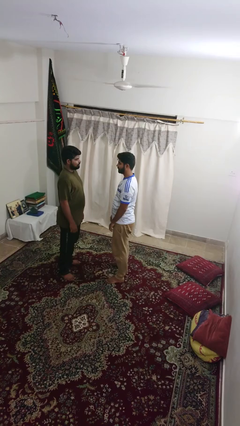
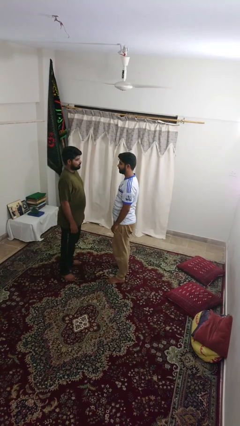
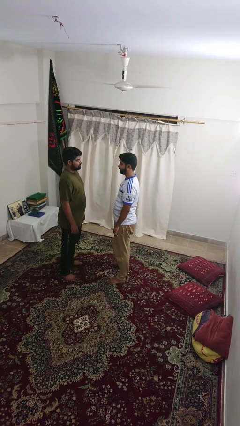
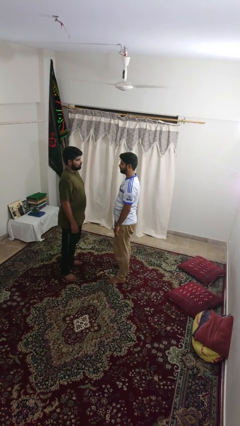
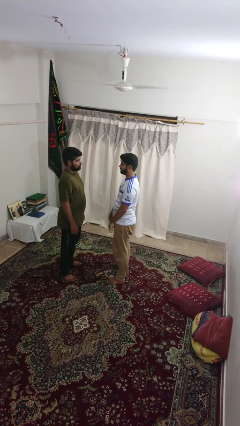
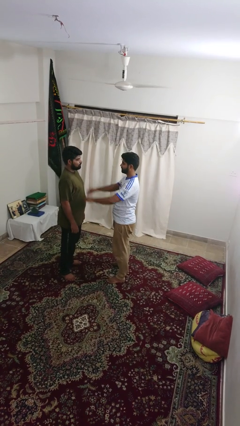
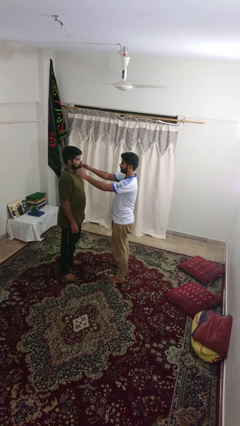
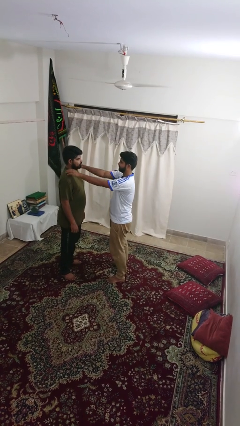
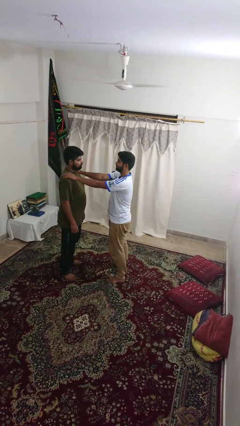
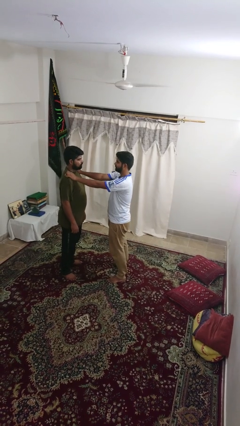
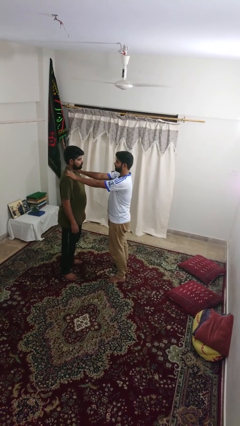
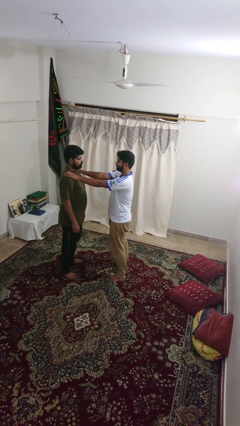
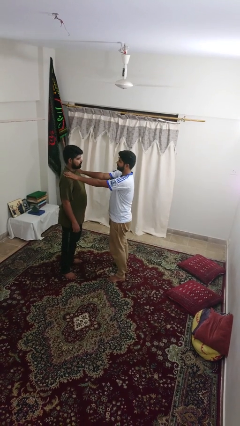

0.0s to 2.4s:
person pounds shoulders of person

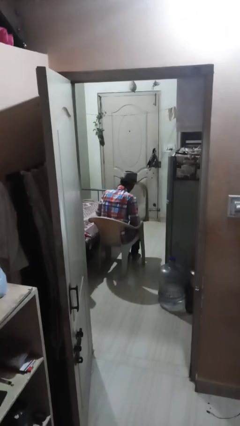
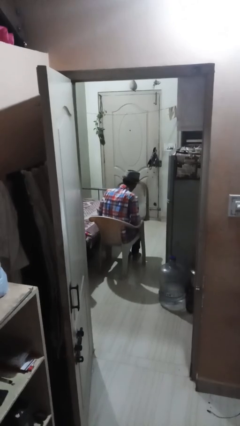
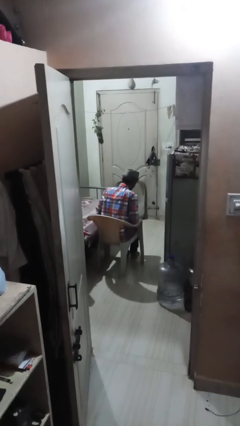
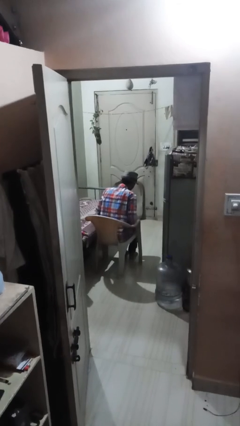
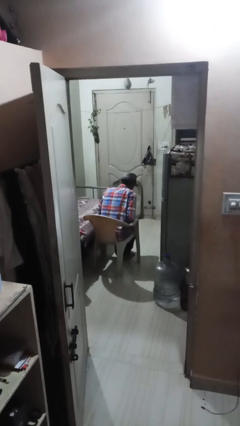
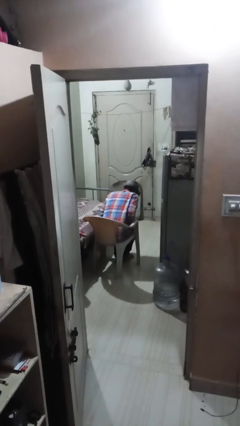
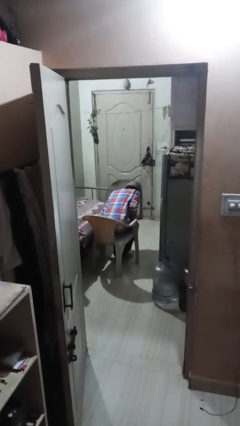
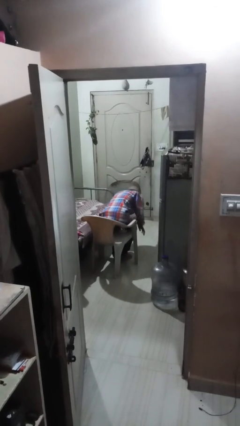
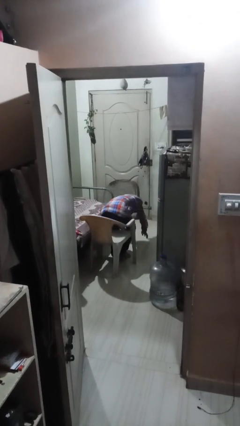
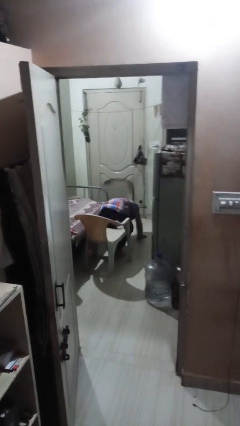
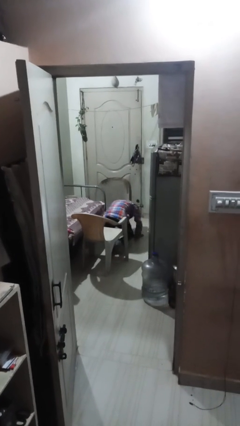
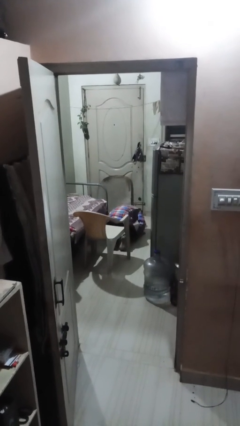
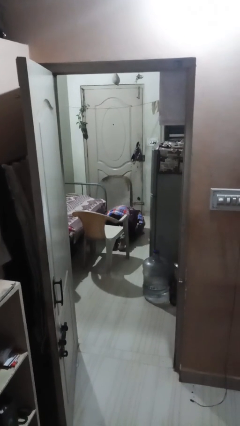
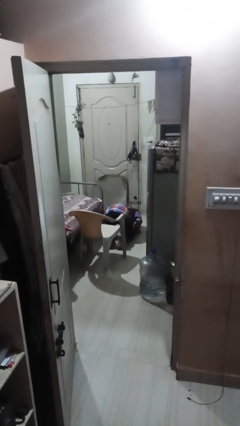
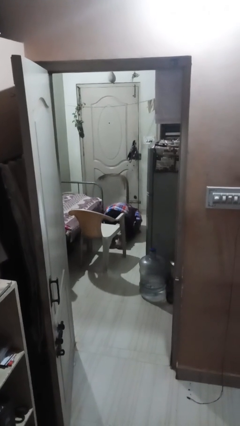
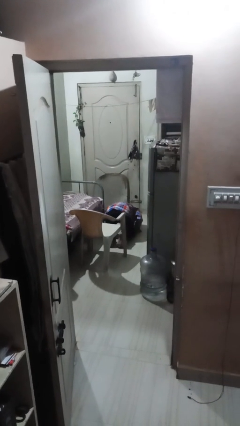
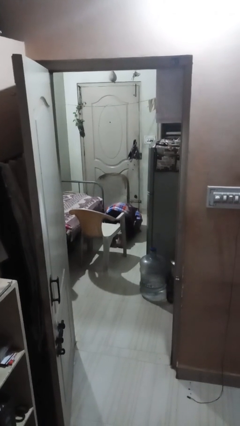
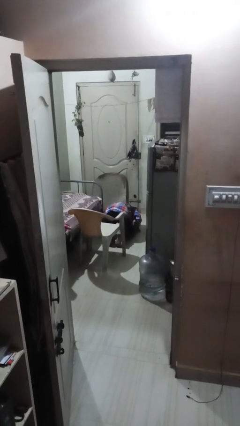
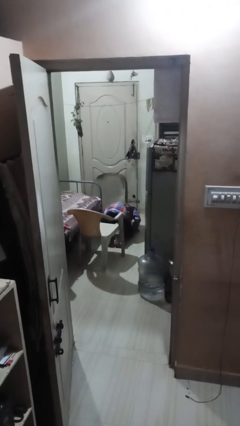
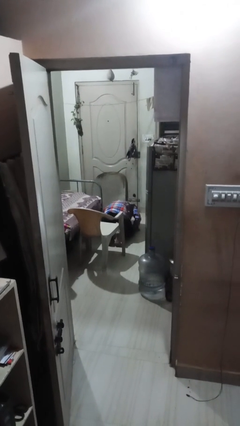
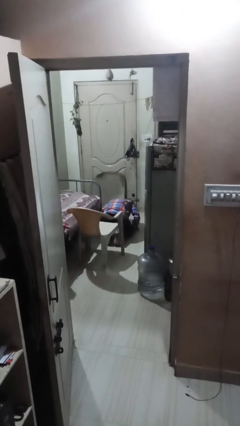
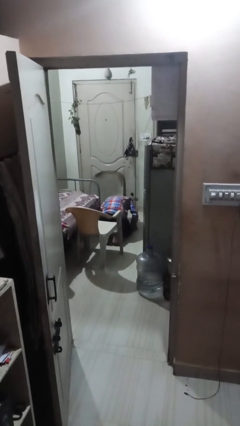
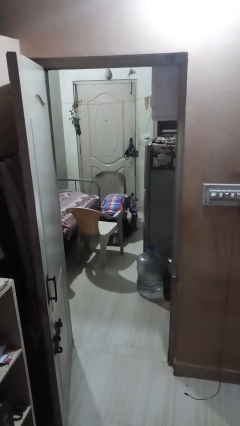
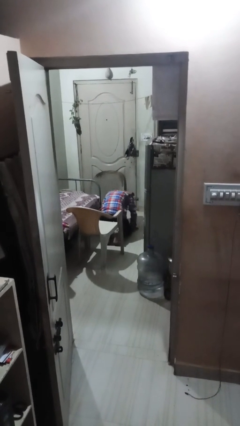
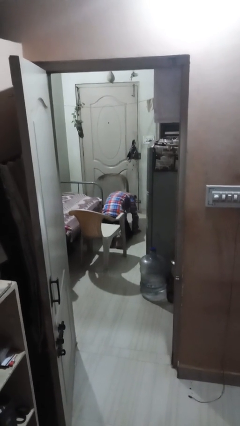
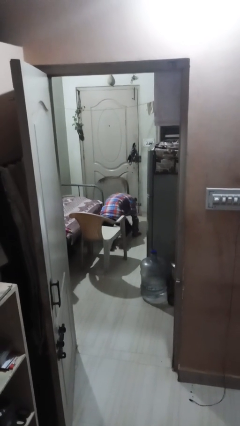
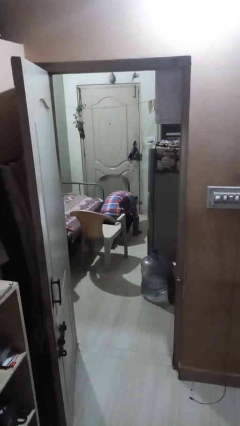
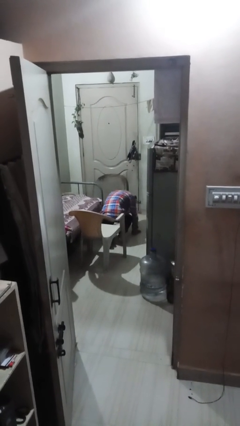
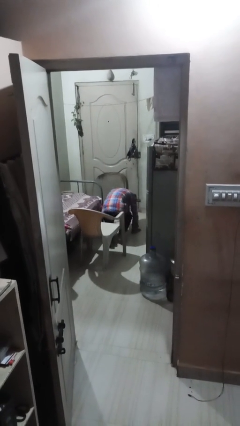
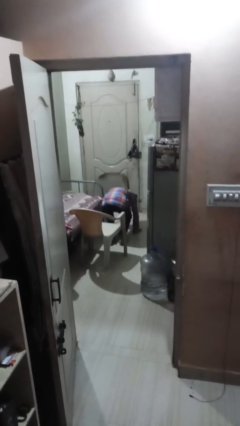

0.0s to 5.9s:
person falls from chair

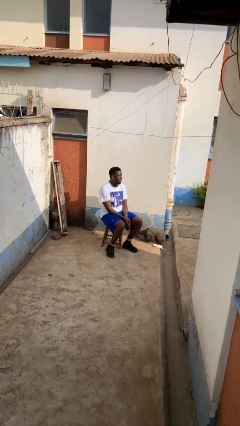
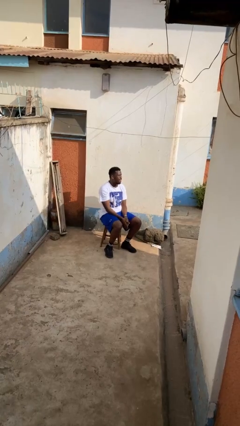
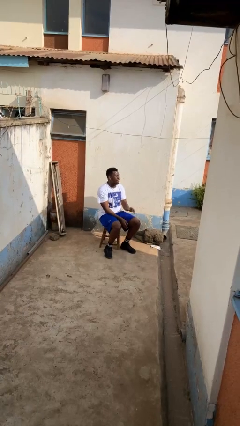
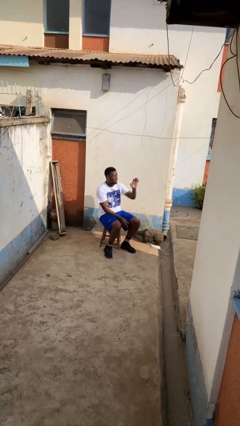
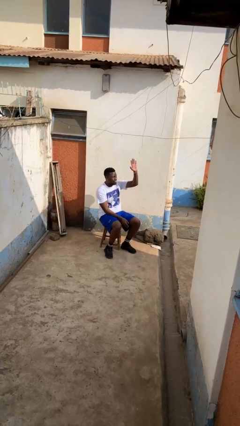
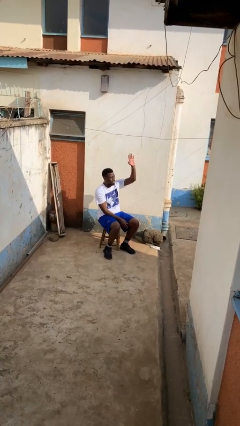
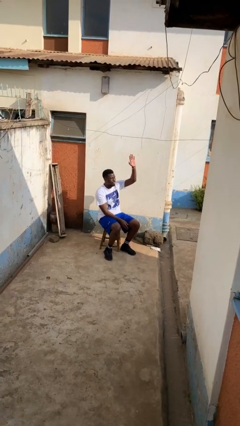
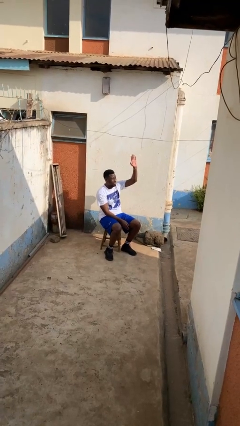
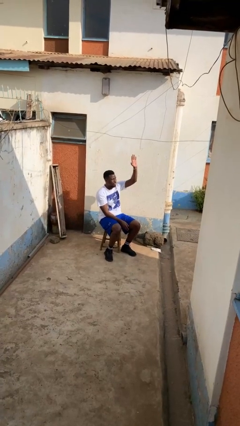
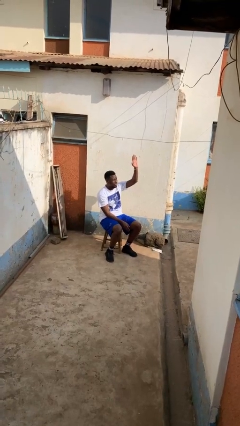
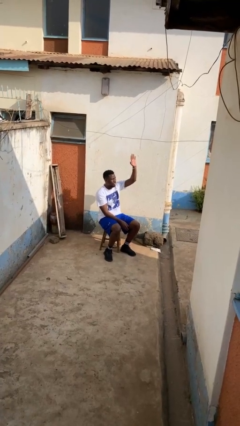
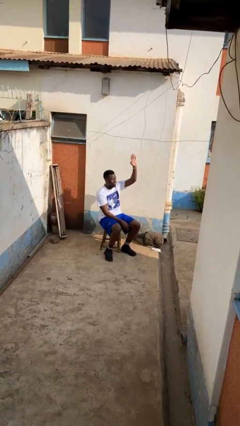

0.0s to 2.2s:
person gestures raise hand

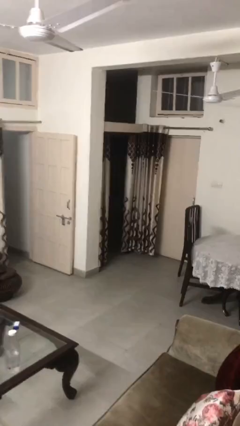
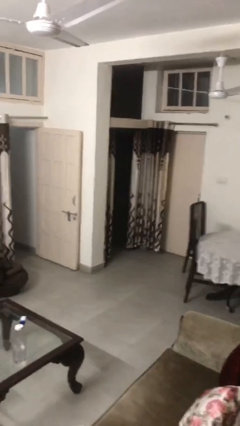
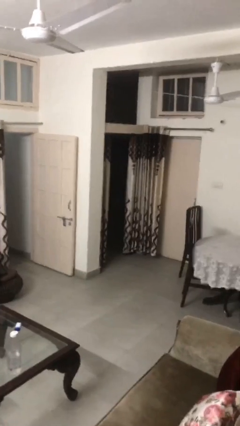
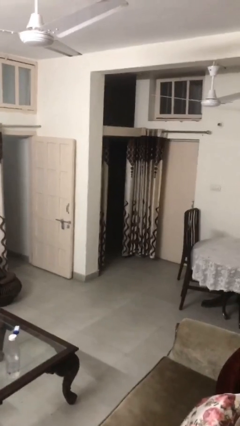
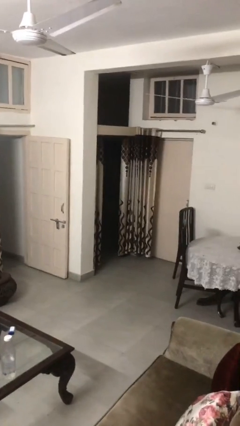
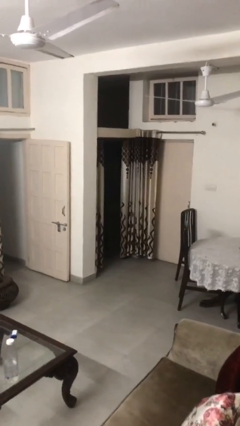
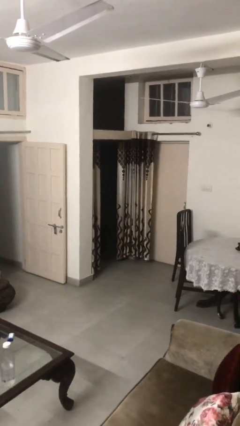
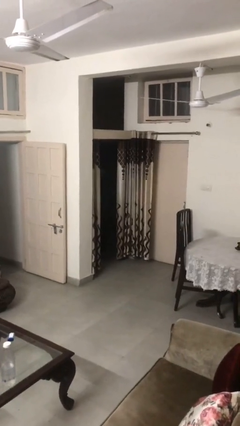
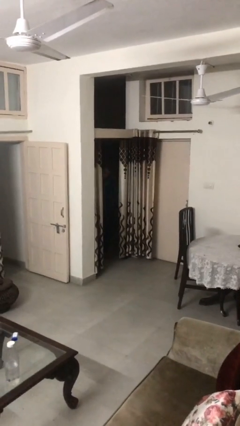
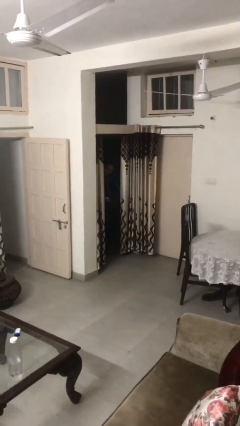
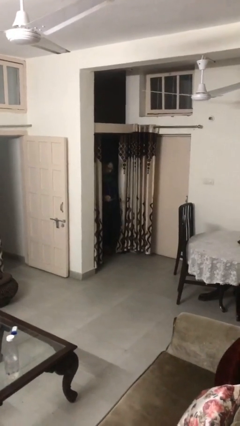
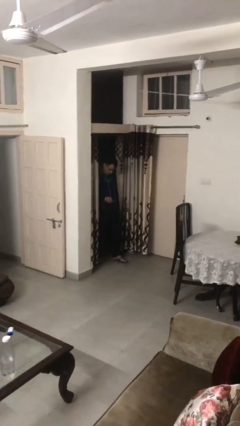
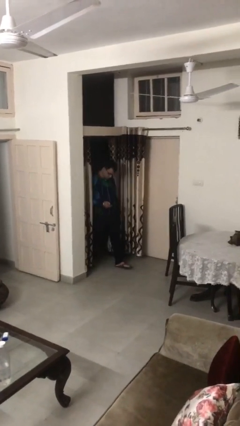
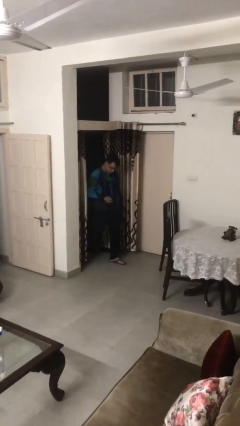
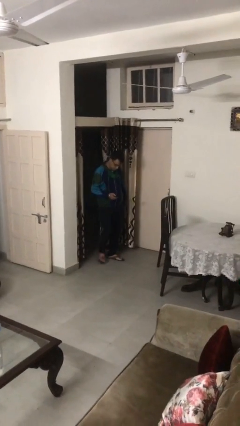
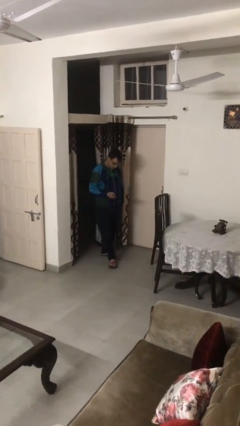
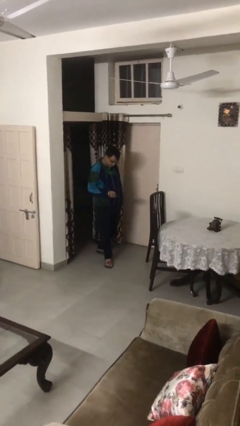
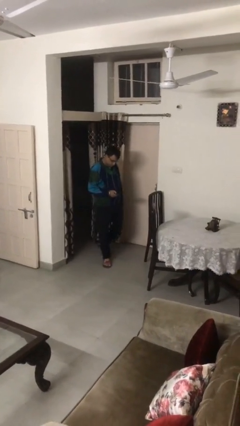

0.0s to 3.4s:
person enters scene through structure

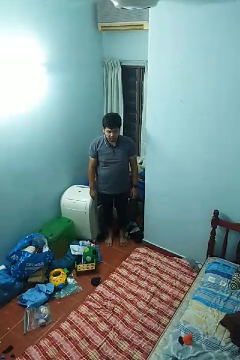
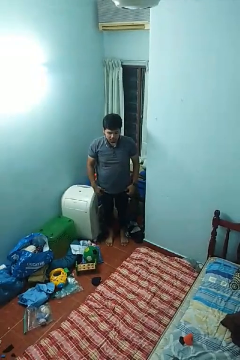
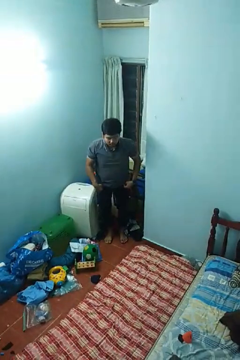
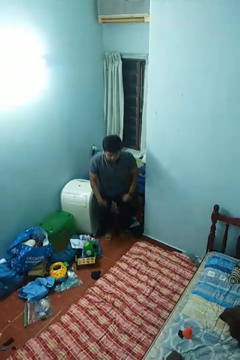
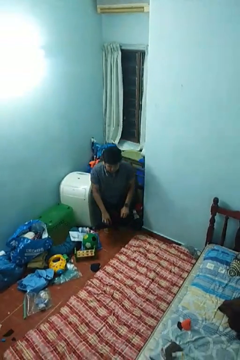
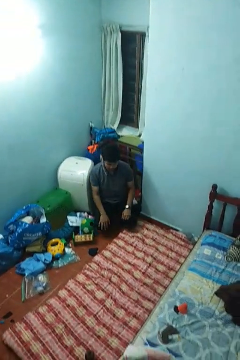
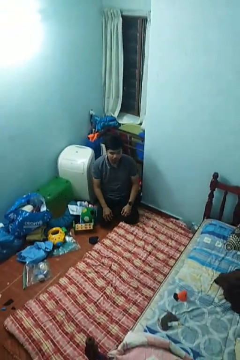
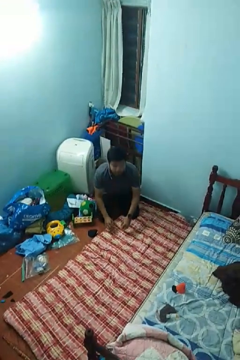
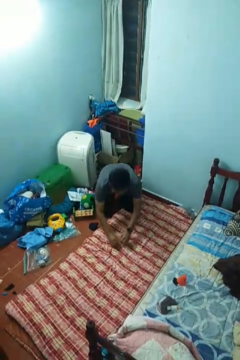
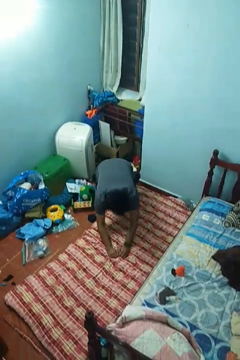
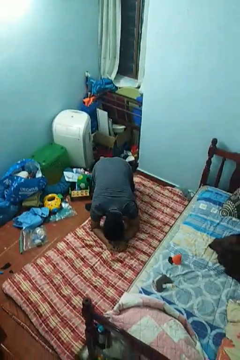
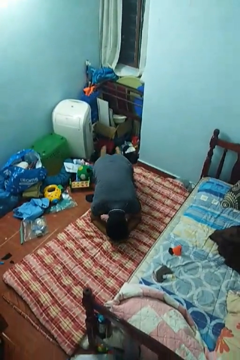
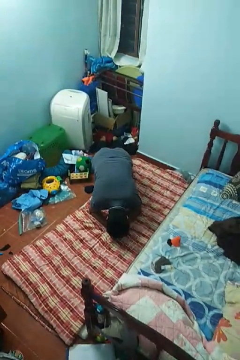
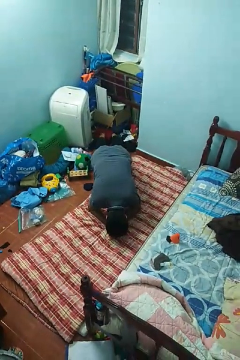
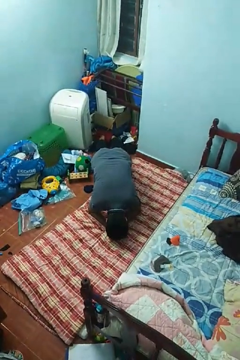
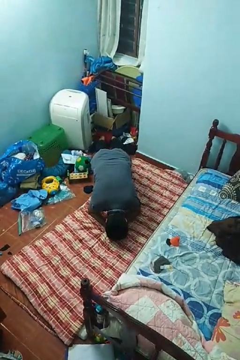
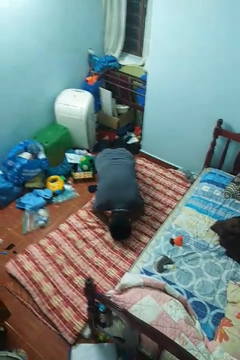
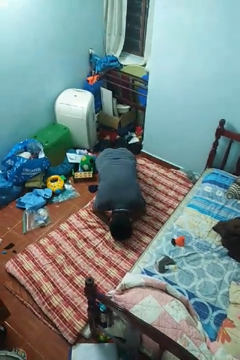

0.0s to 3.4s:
person exercises with plank

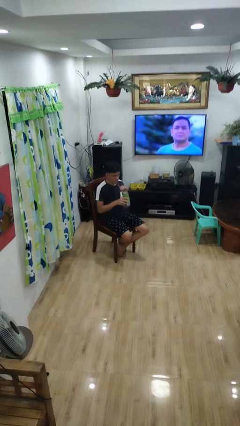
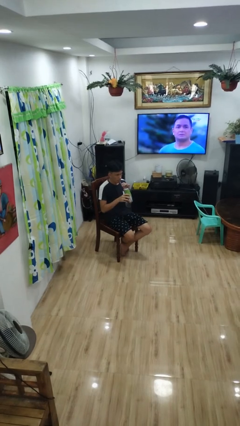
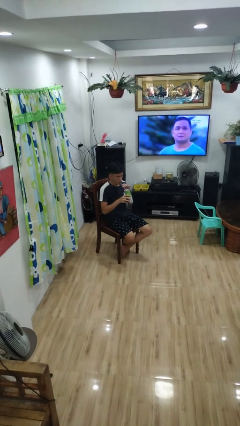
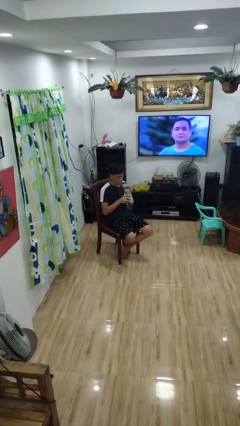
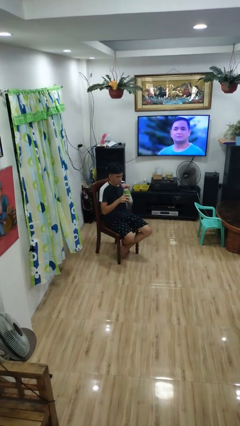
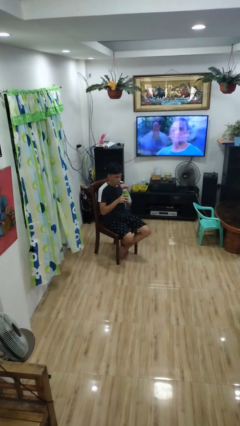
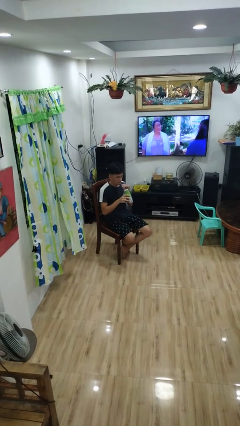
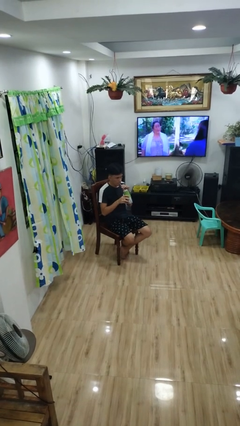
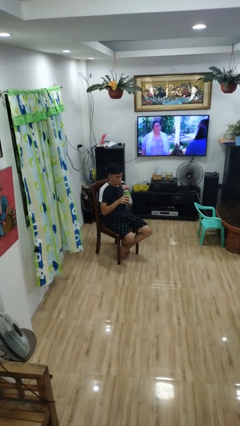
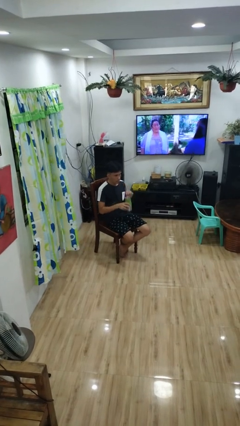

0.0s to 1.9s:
person drinks from straw
